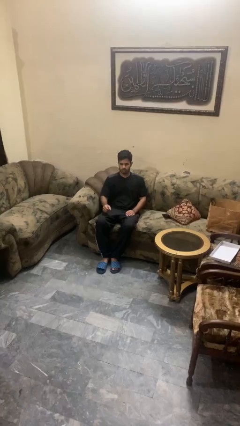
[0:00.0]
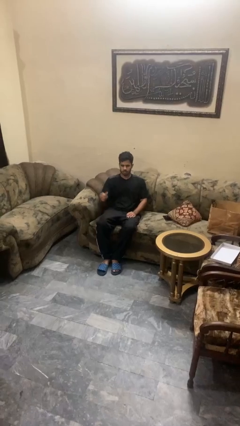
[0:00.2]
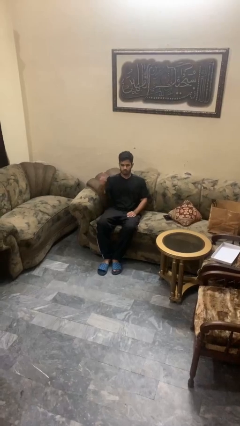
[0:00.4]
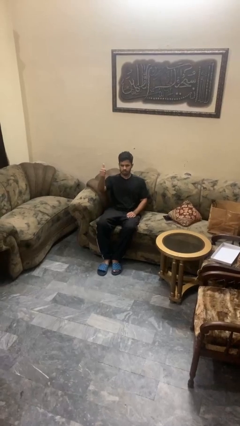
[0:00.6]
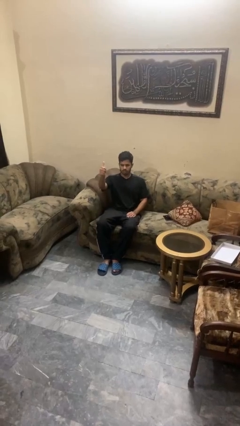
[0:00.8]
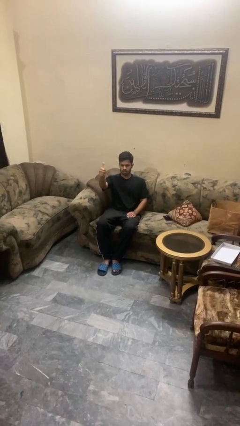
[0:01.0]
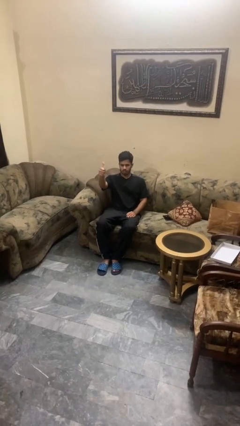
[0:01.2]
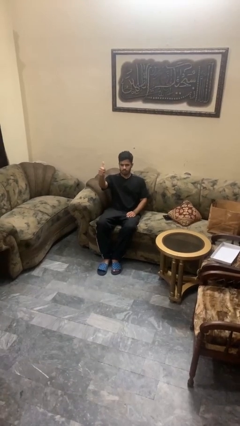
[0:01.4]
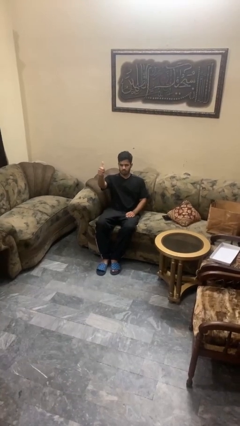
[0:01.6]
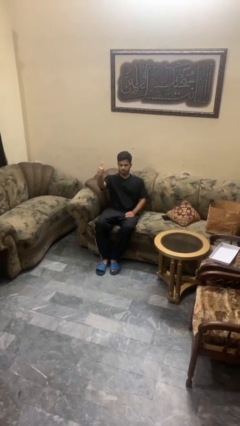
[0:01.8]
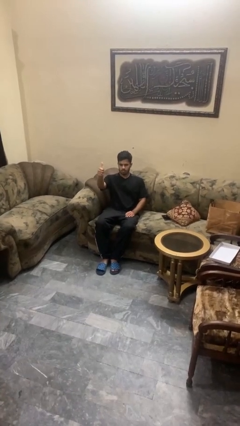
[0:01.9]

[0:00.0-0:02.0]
person gestures thumbs up

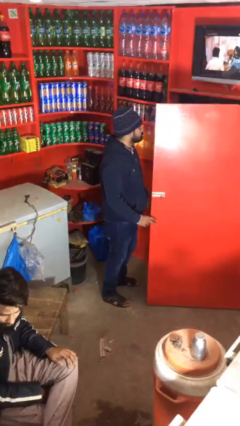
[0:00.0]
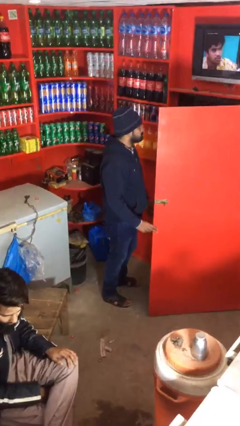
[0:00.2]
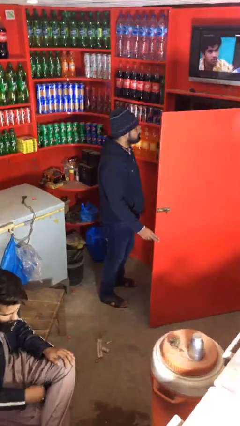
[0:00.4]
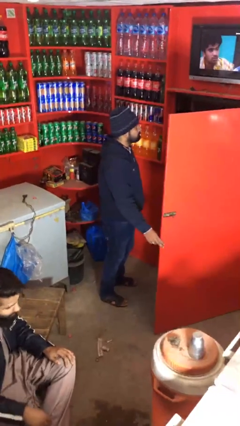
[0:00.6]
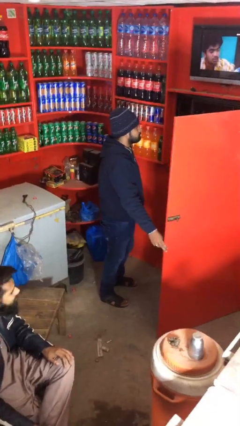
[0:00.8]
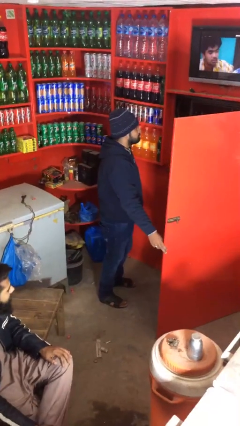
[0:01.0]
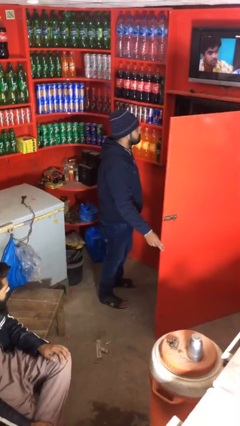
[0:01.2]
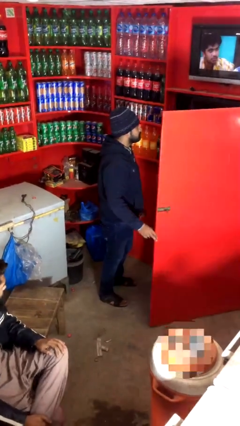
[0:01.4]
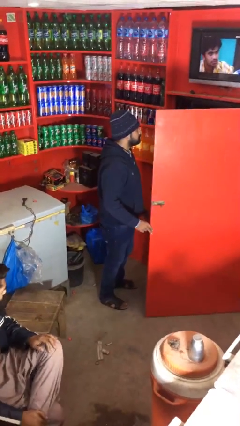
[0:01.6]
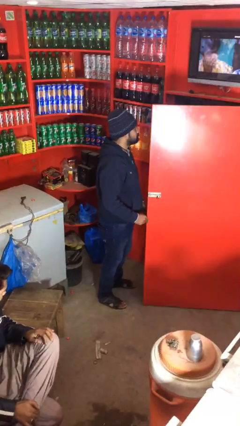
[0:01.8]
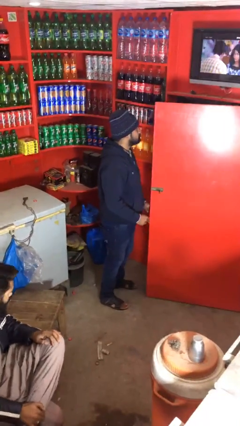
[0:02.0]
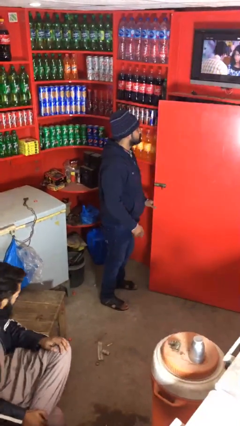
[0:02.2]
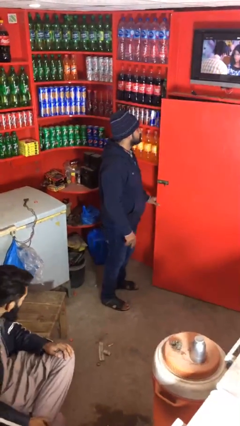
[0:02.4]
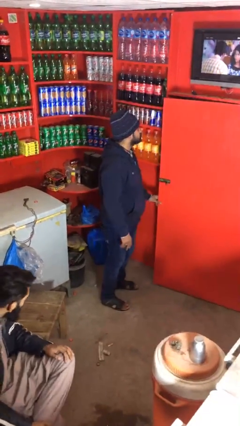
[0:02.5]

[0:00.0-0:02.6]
person closes facility door

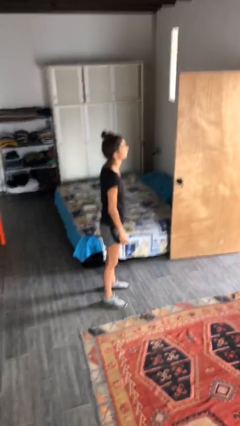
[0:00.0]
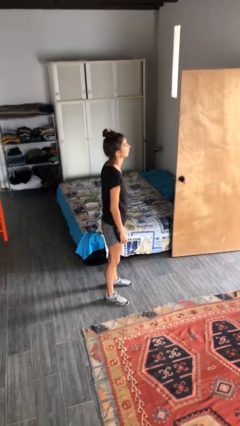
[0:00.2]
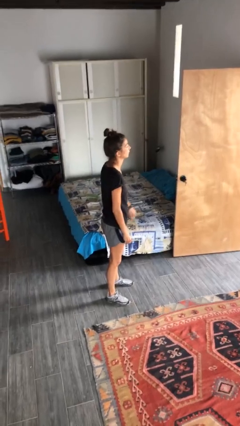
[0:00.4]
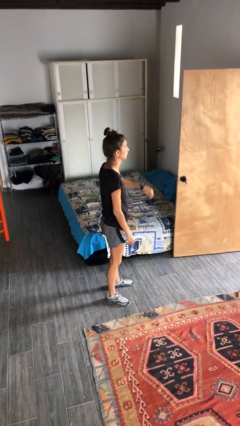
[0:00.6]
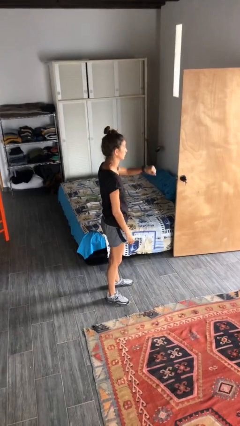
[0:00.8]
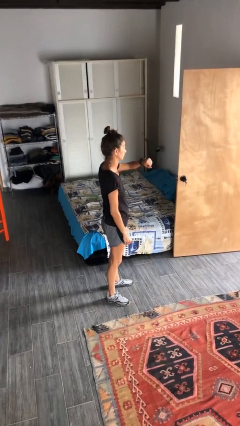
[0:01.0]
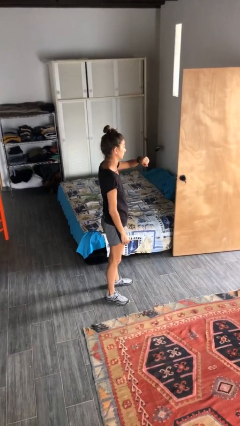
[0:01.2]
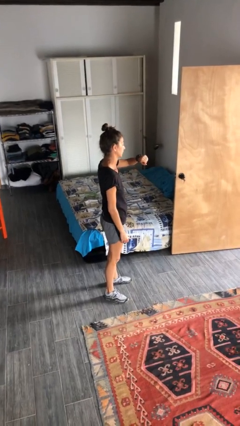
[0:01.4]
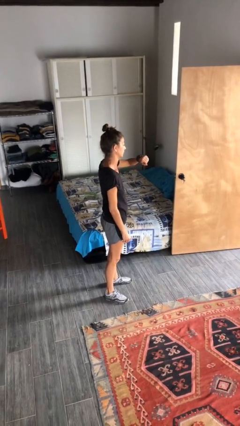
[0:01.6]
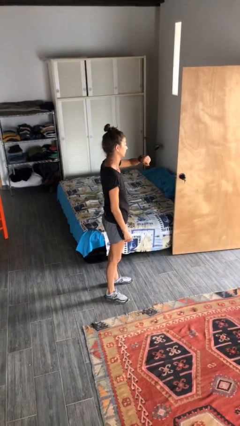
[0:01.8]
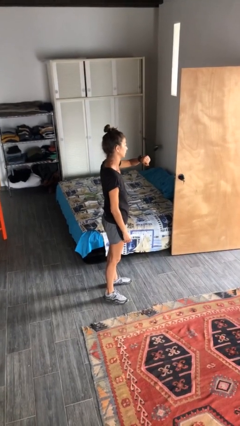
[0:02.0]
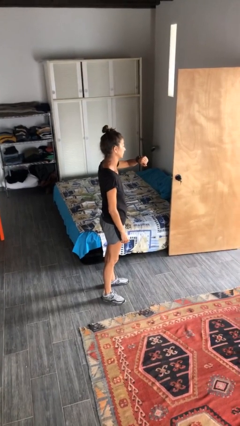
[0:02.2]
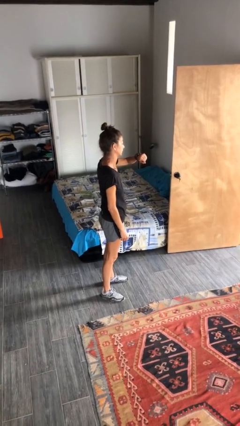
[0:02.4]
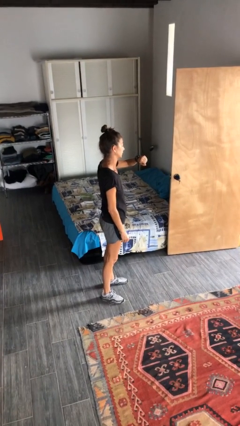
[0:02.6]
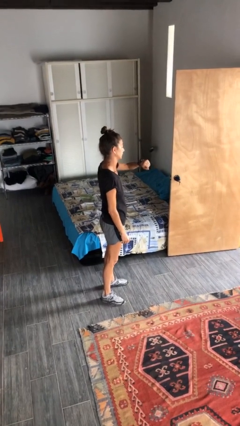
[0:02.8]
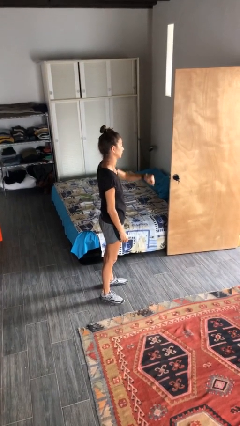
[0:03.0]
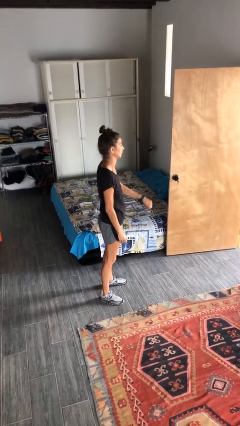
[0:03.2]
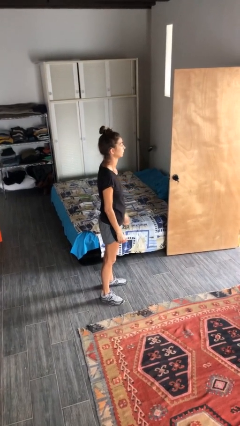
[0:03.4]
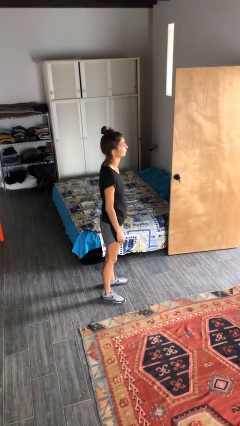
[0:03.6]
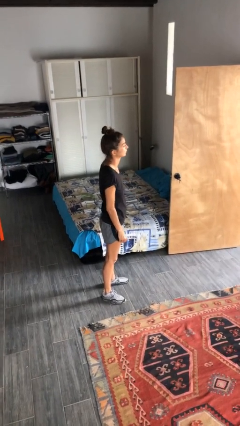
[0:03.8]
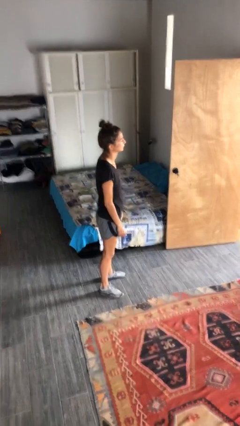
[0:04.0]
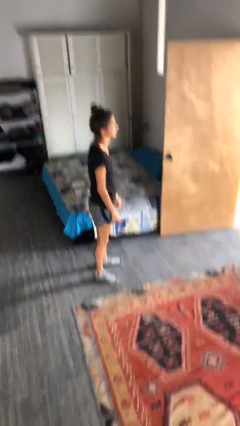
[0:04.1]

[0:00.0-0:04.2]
person looks at wristwatch

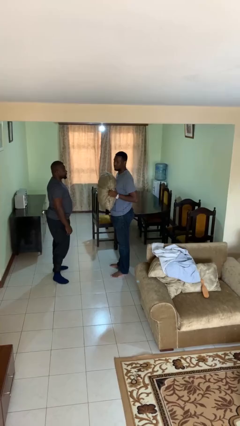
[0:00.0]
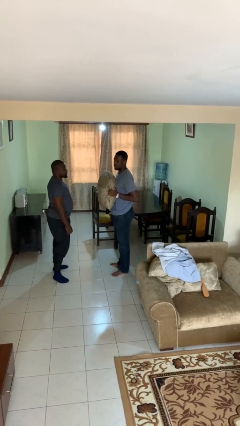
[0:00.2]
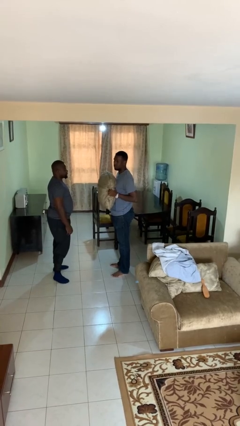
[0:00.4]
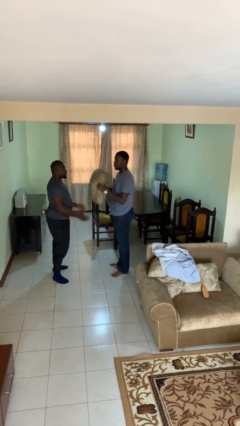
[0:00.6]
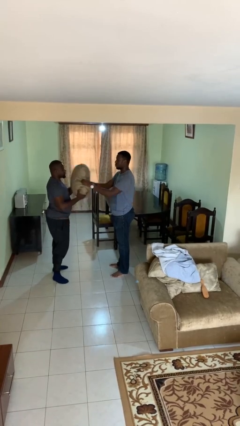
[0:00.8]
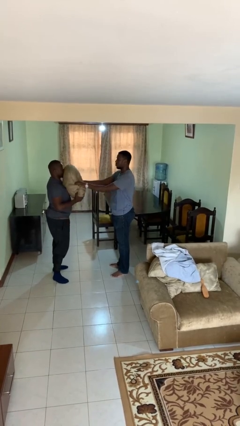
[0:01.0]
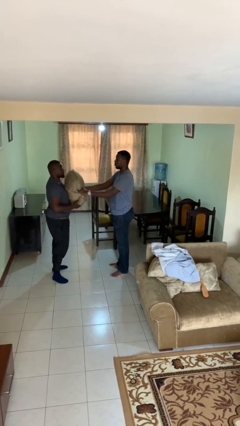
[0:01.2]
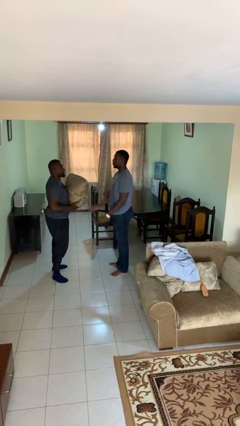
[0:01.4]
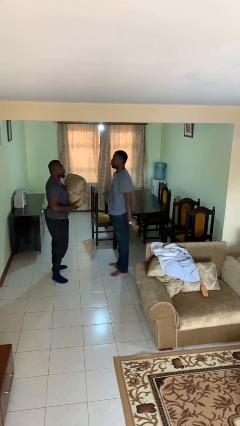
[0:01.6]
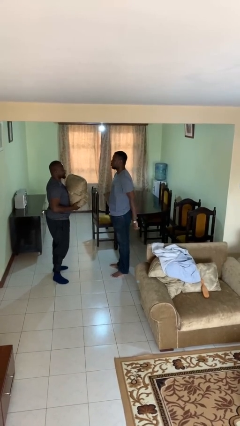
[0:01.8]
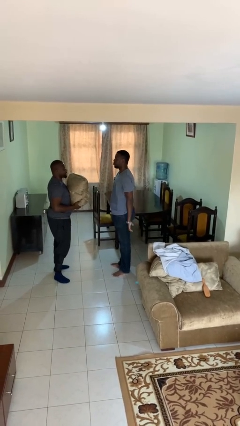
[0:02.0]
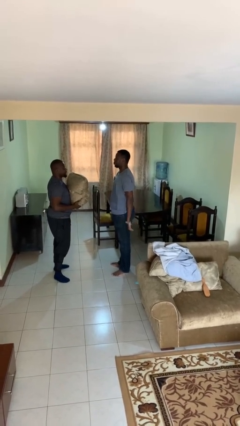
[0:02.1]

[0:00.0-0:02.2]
person transfers object to person

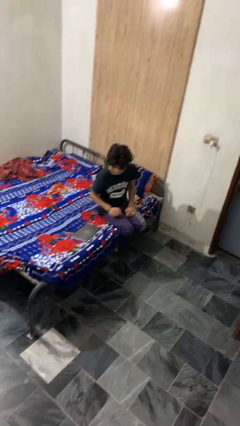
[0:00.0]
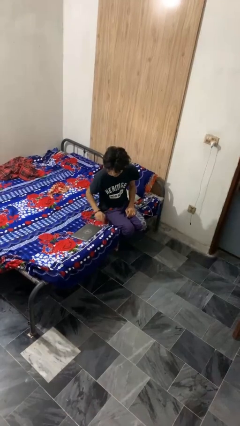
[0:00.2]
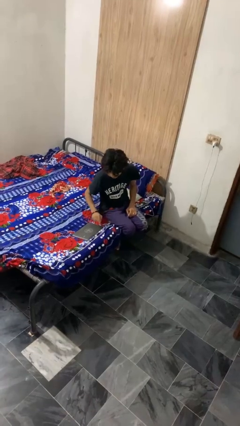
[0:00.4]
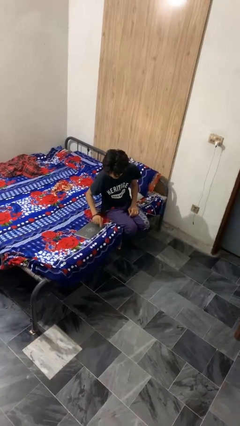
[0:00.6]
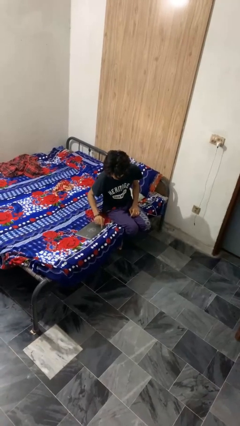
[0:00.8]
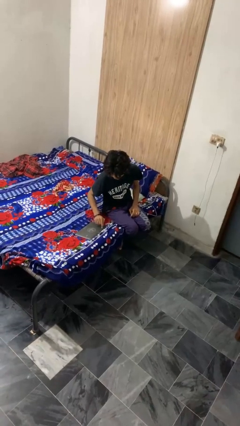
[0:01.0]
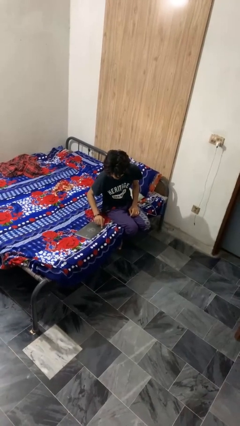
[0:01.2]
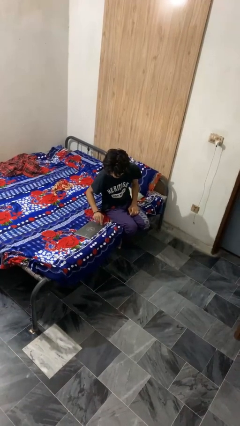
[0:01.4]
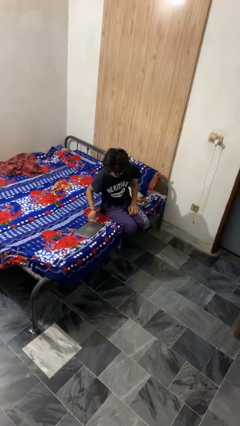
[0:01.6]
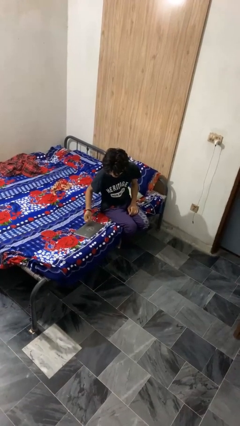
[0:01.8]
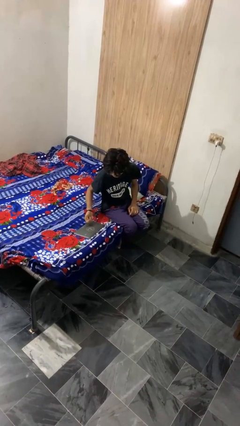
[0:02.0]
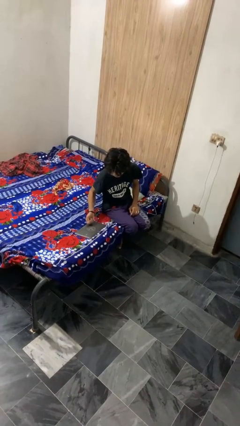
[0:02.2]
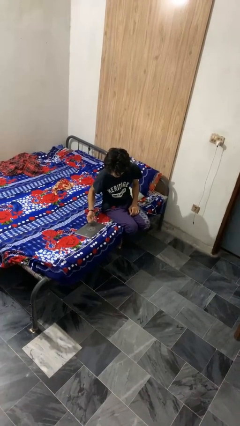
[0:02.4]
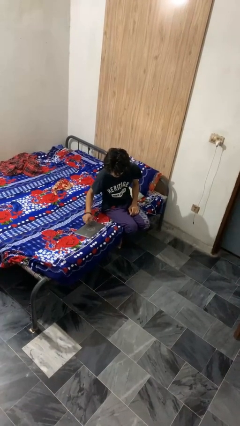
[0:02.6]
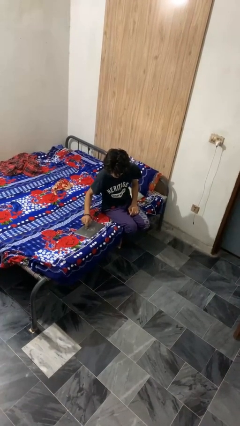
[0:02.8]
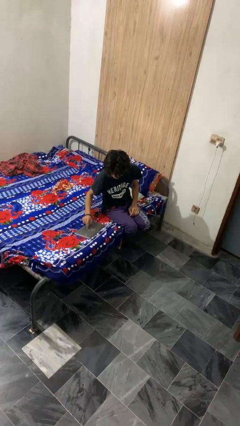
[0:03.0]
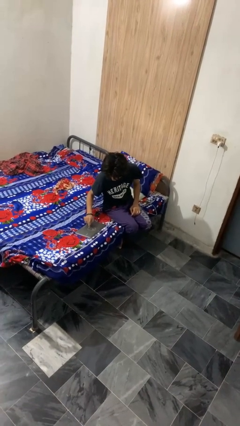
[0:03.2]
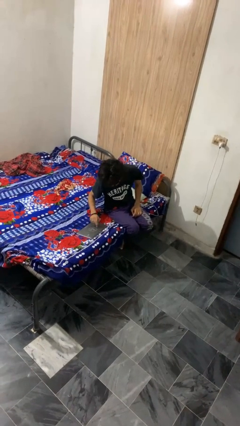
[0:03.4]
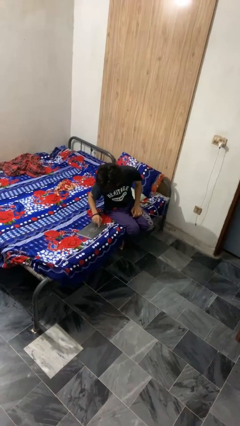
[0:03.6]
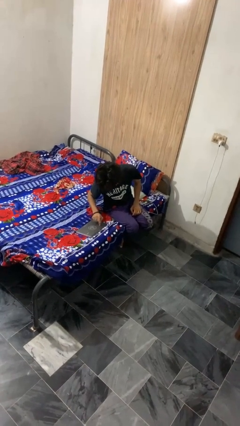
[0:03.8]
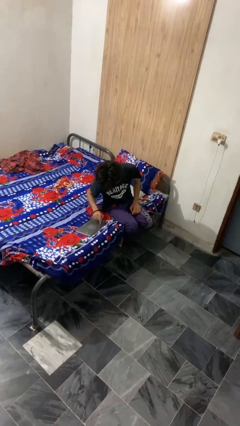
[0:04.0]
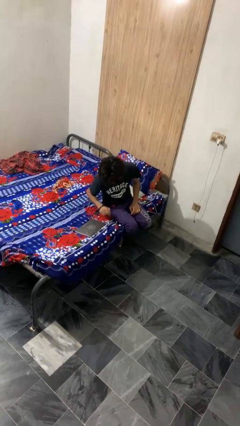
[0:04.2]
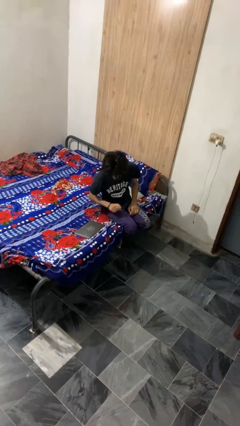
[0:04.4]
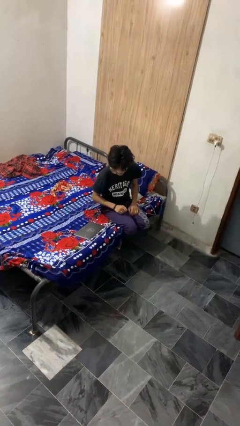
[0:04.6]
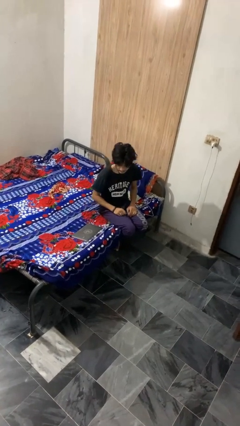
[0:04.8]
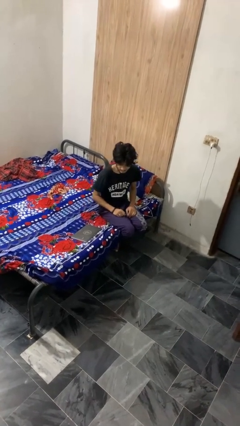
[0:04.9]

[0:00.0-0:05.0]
person taps object with finger

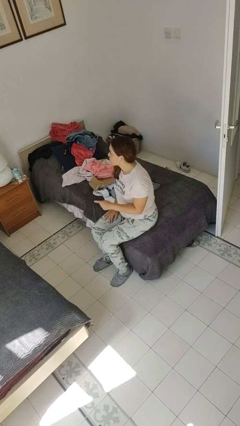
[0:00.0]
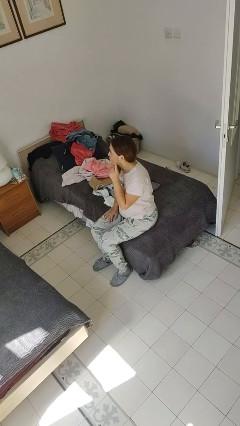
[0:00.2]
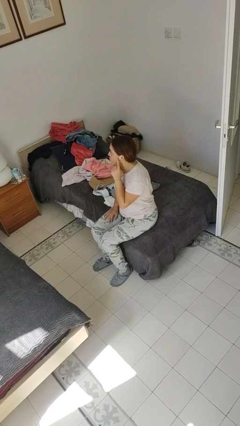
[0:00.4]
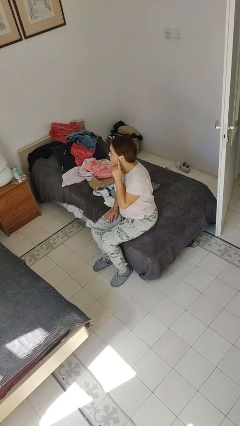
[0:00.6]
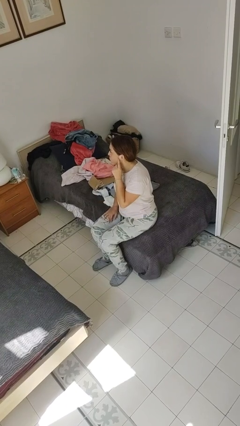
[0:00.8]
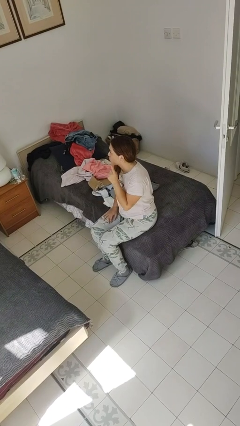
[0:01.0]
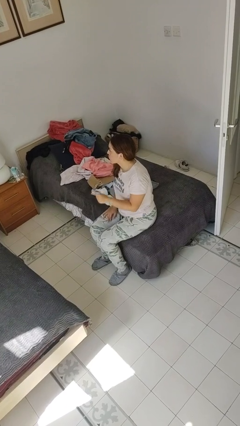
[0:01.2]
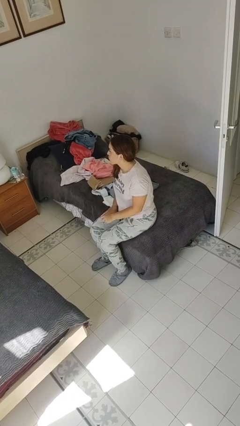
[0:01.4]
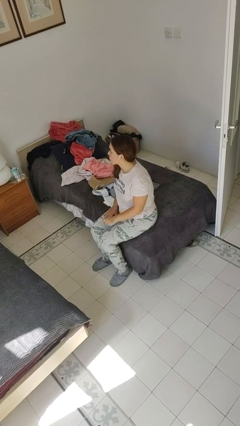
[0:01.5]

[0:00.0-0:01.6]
person gestures listen closely
